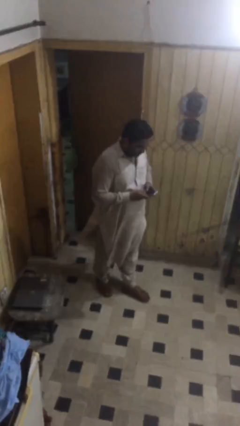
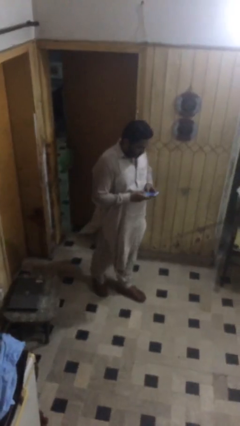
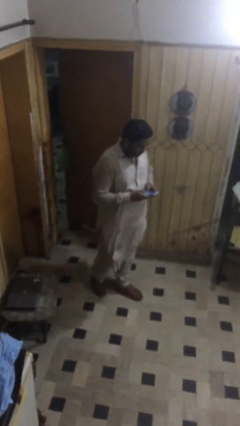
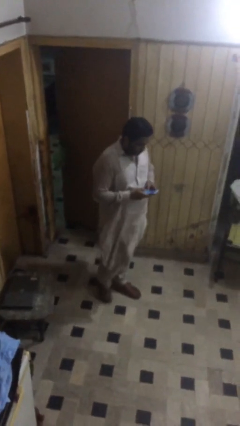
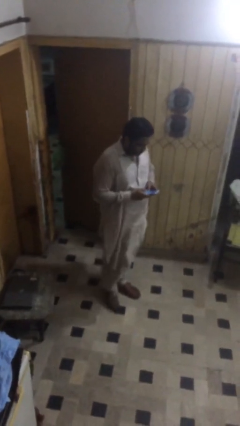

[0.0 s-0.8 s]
person talks on phone

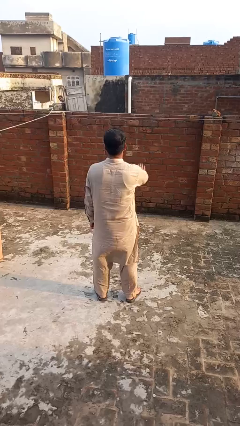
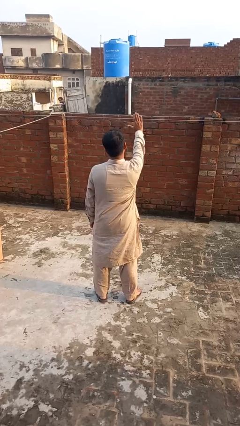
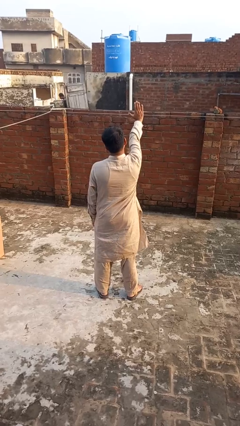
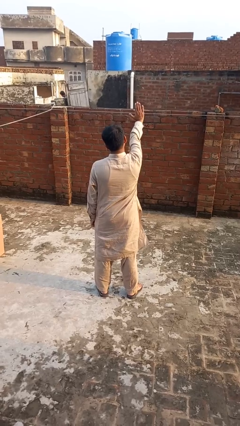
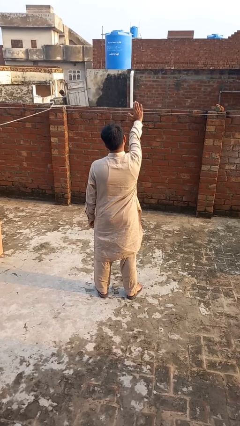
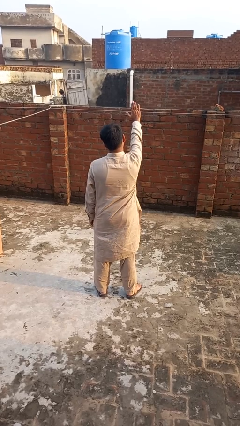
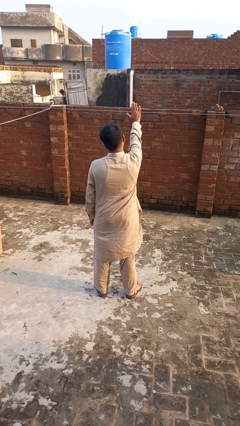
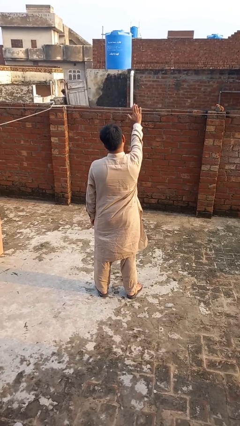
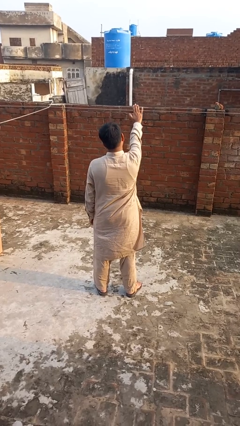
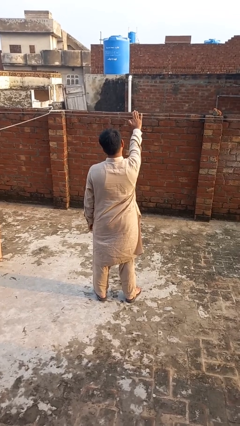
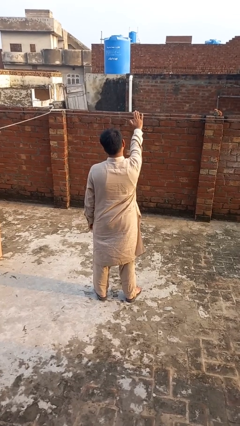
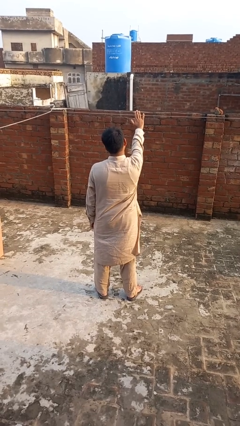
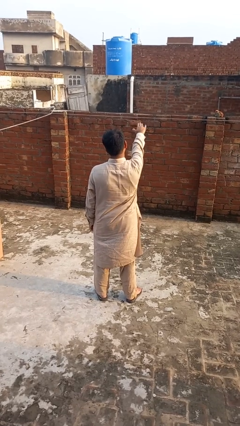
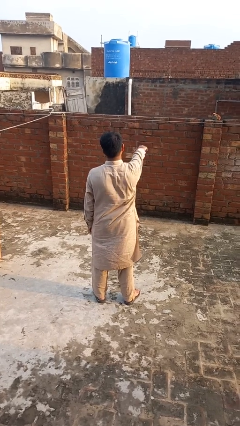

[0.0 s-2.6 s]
person gestures stop

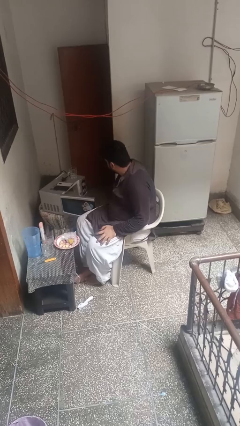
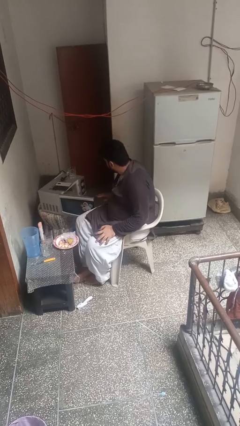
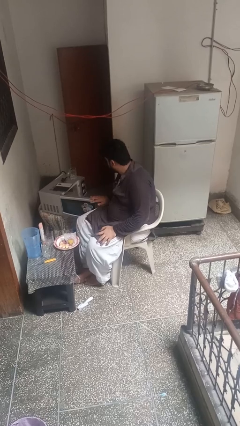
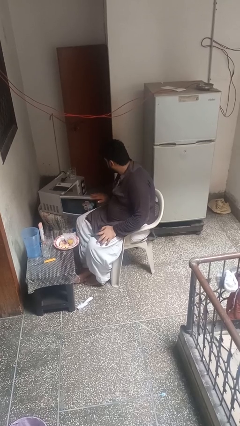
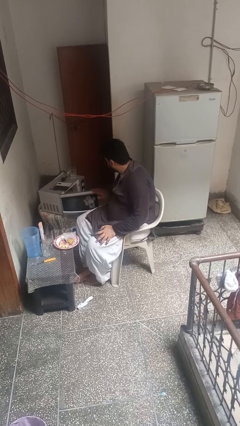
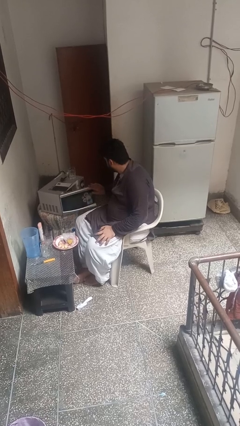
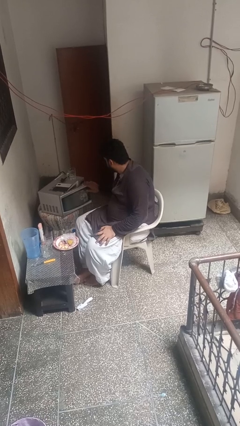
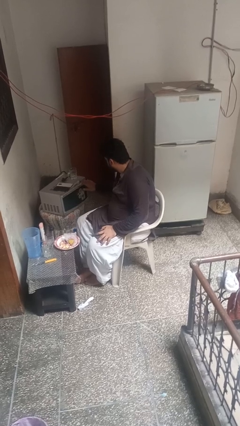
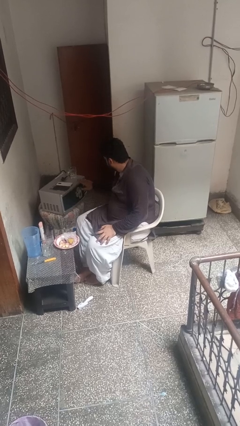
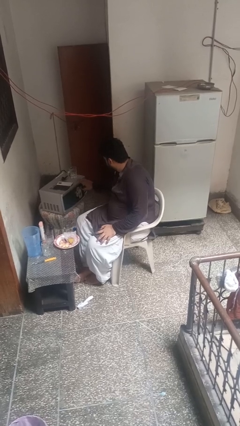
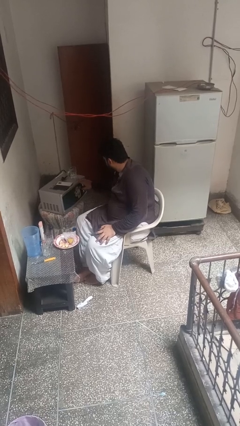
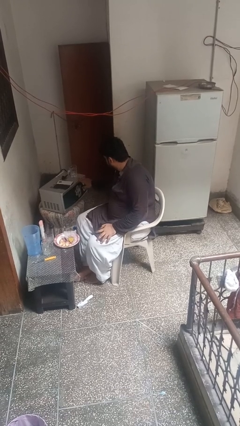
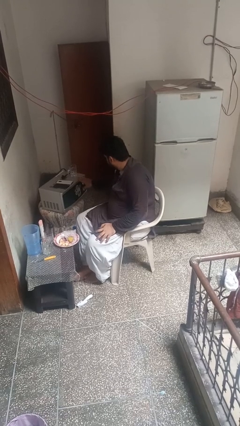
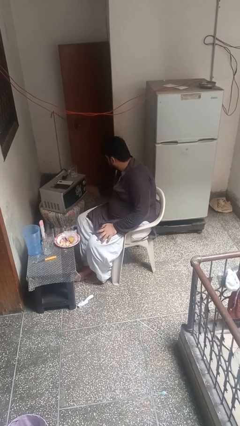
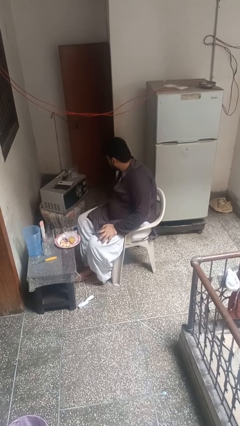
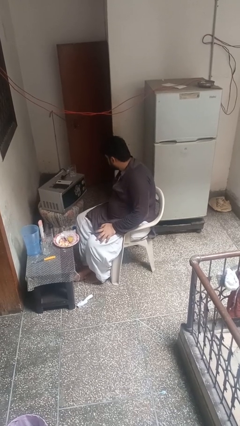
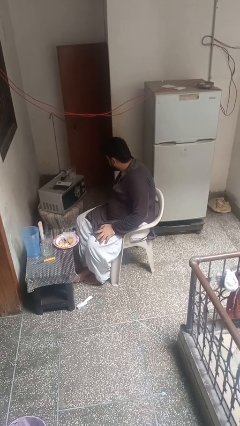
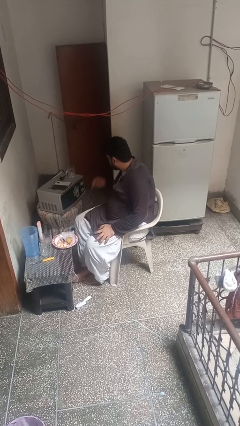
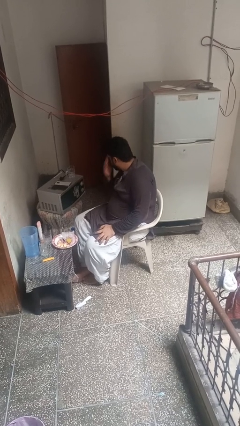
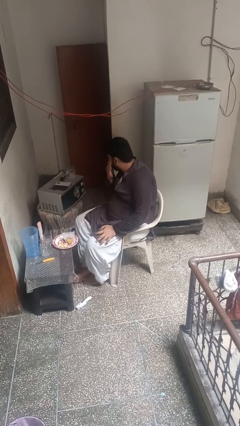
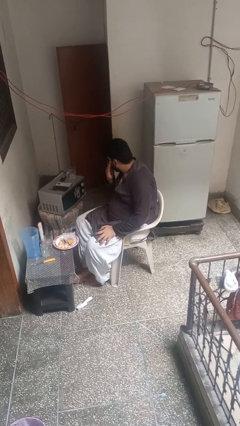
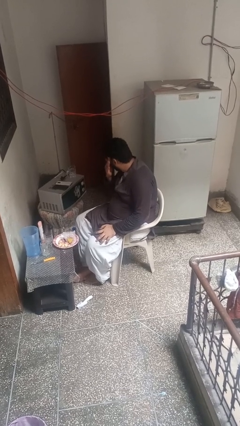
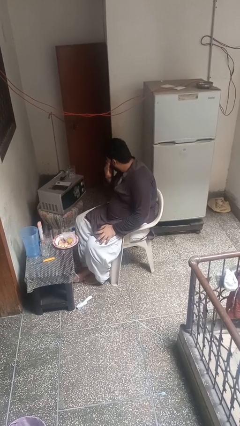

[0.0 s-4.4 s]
person closes microwave

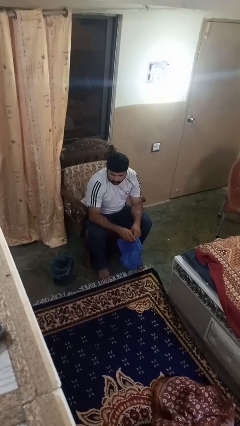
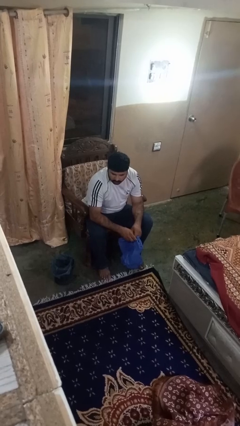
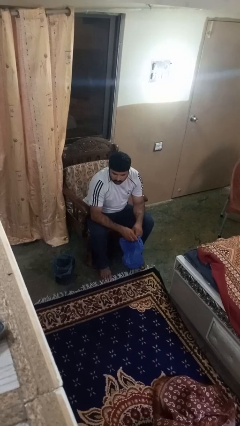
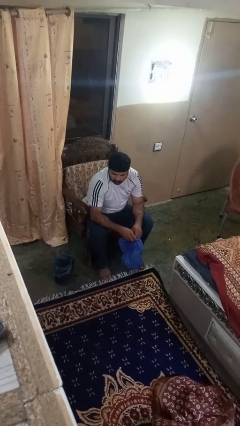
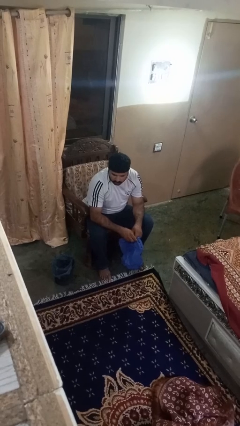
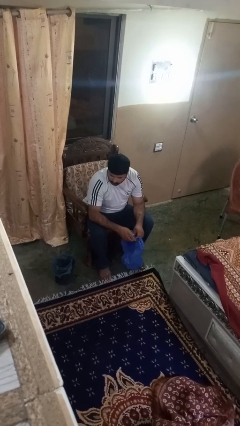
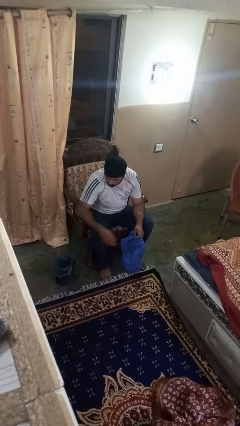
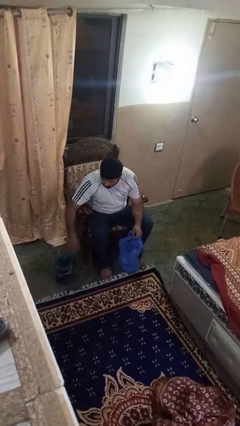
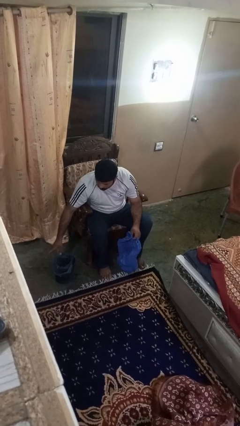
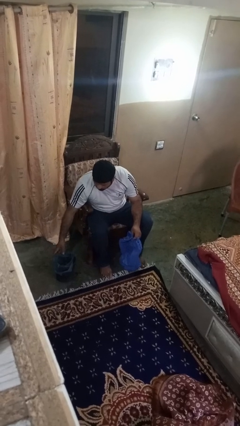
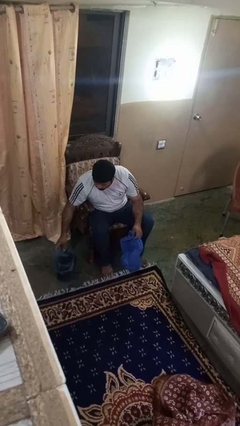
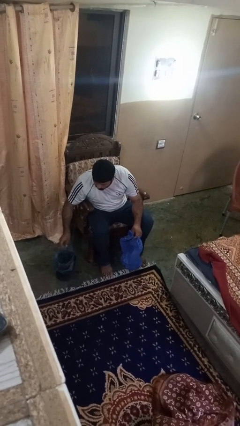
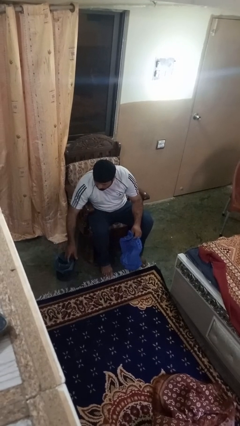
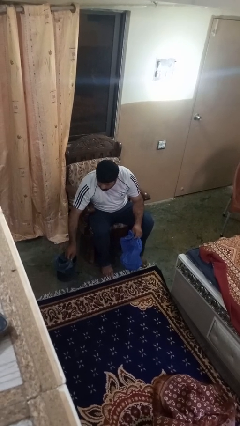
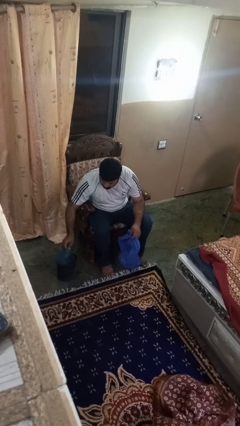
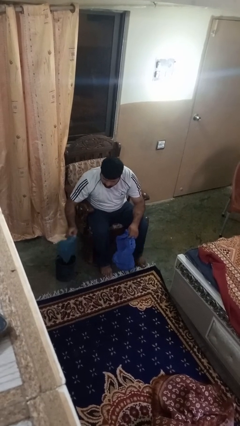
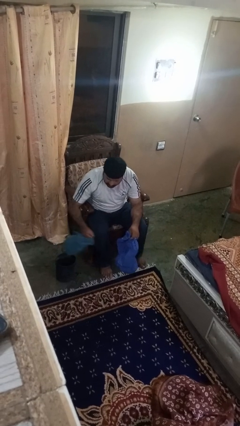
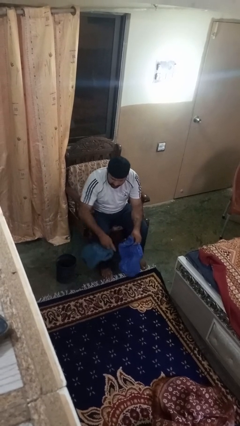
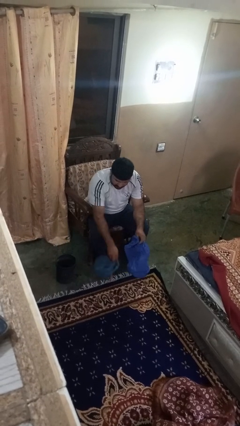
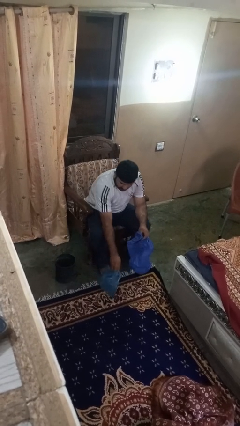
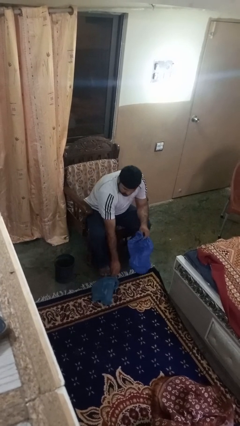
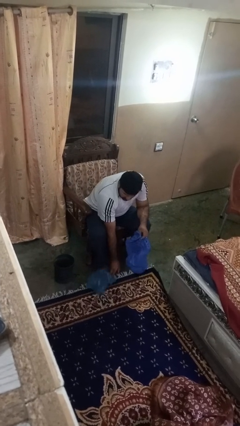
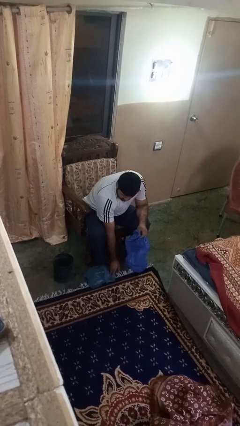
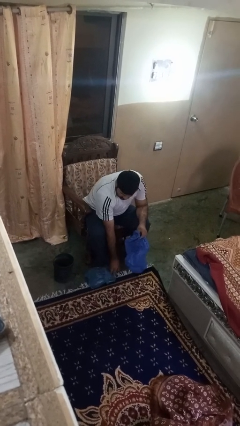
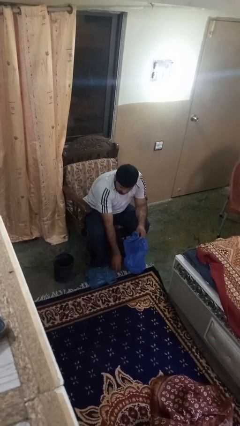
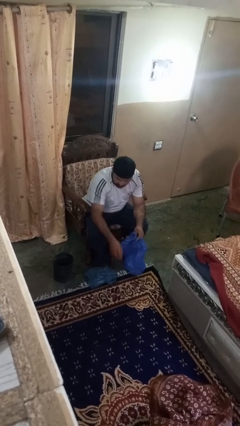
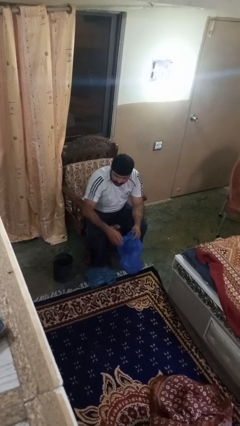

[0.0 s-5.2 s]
person removes trashbag from trashcan

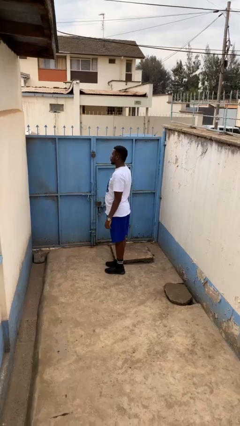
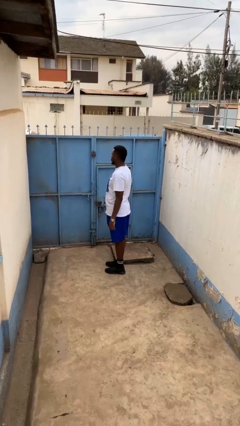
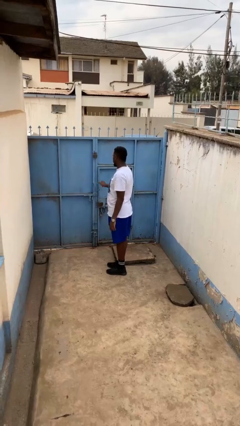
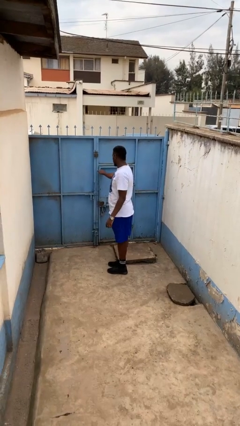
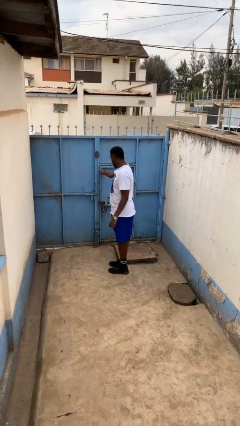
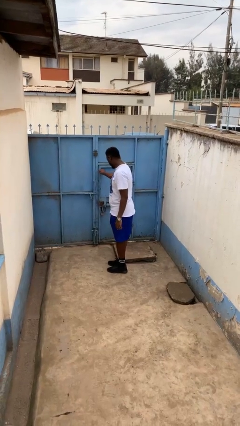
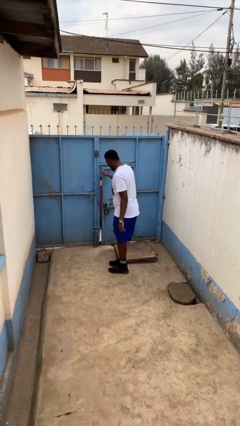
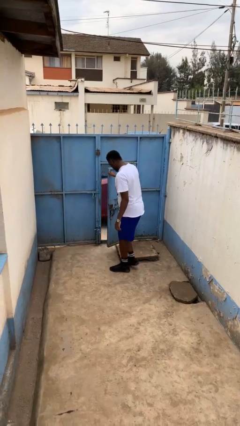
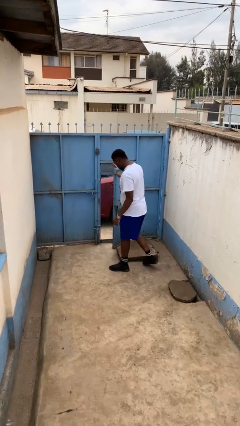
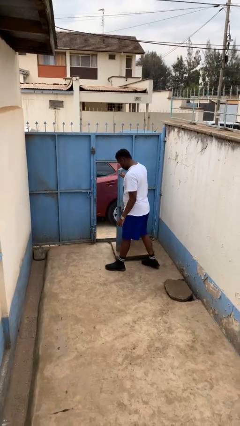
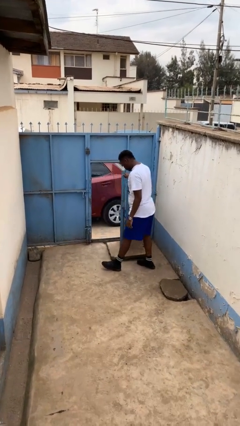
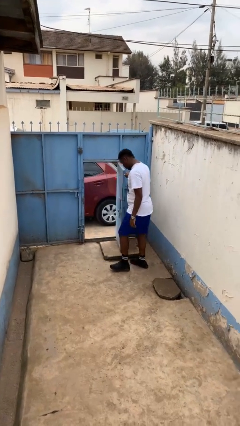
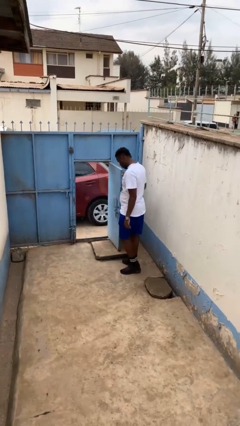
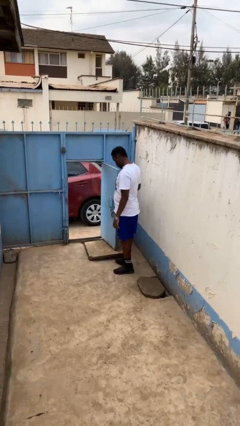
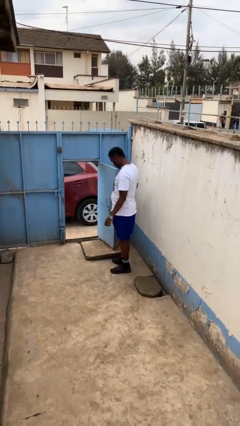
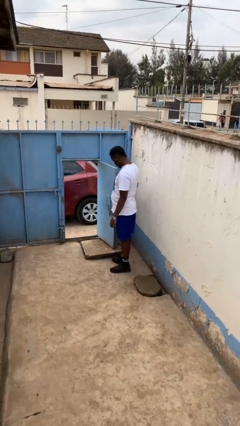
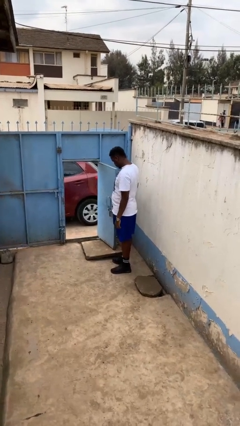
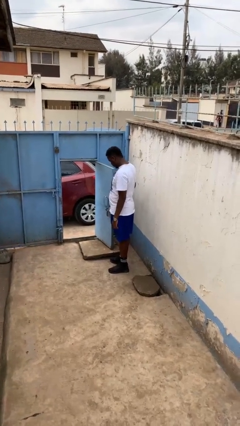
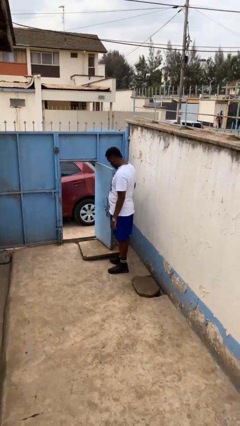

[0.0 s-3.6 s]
person opens gate

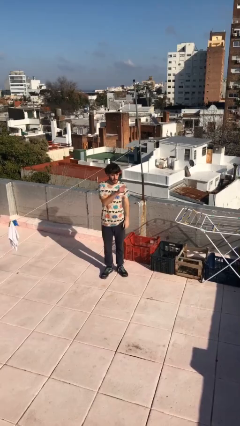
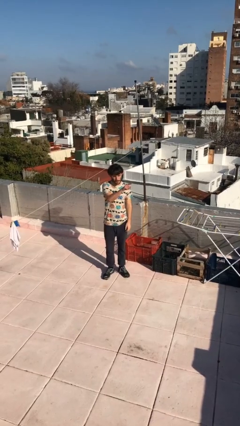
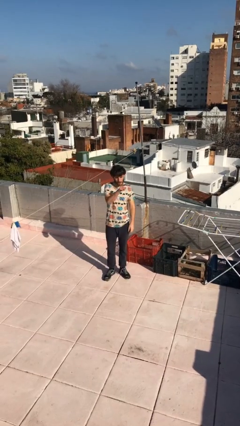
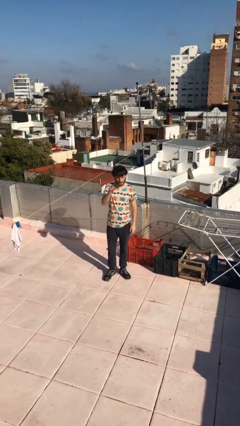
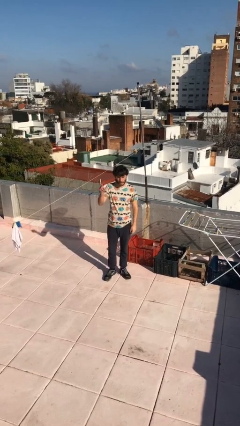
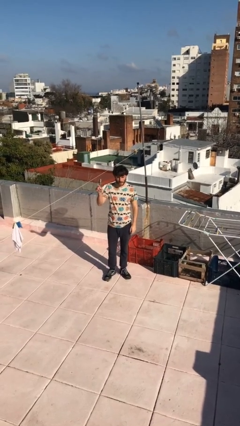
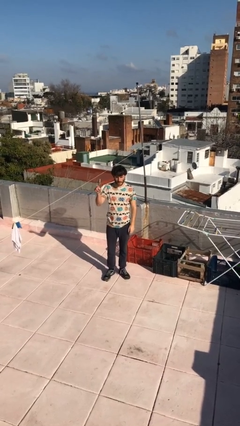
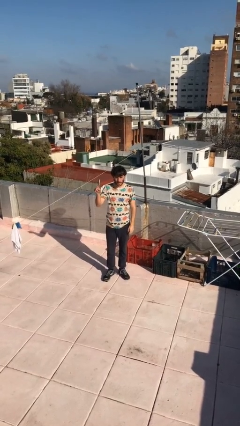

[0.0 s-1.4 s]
person gestures swipe right
